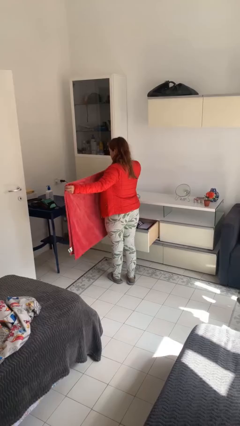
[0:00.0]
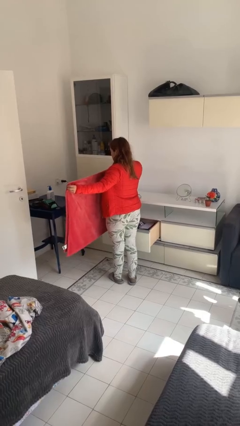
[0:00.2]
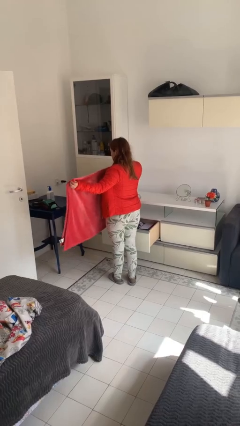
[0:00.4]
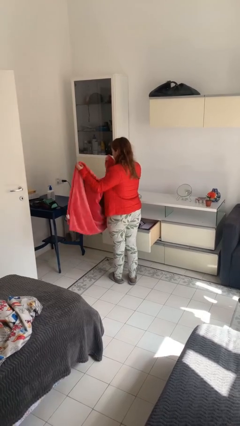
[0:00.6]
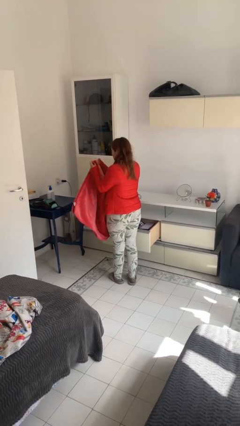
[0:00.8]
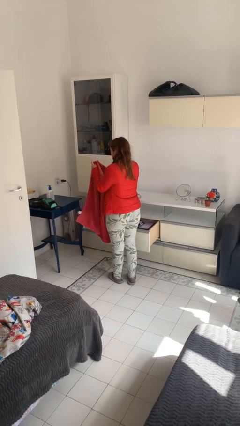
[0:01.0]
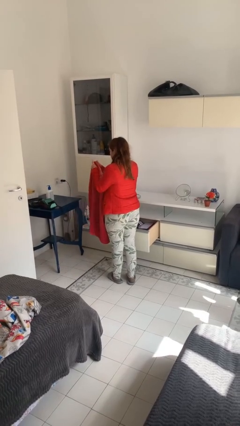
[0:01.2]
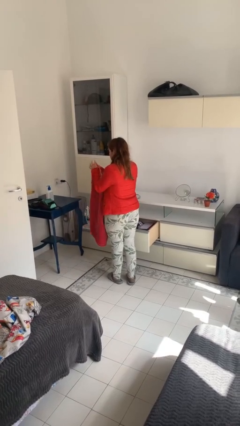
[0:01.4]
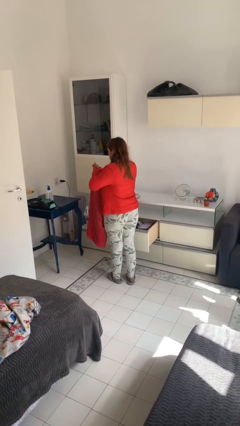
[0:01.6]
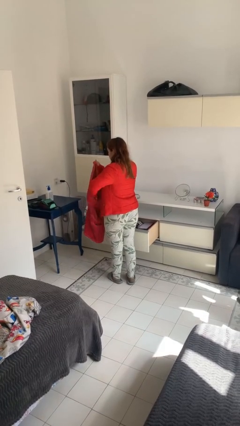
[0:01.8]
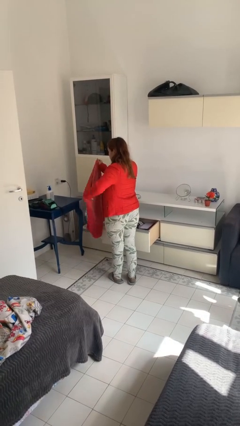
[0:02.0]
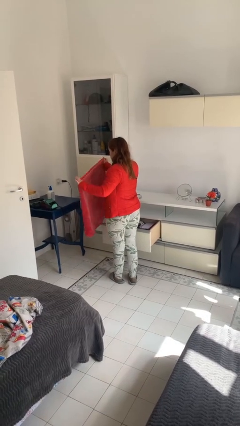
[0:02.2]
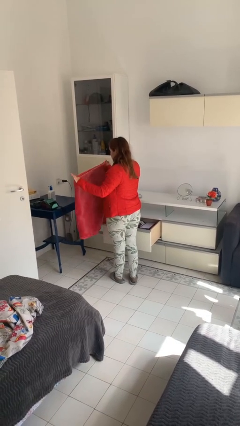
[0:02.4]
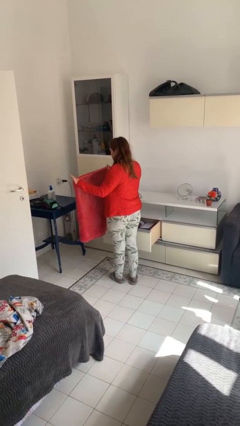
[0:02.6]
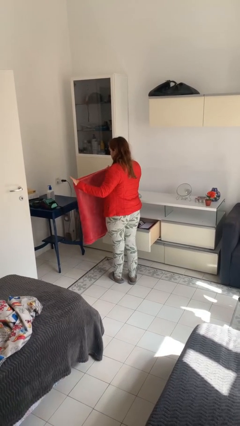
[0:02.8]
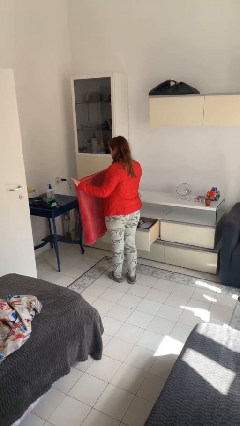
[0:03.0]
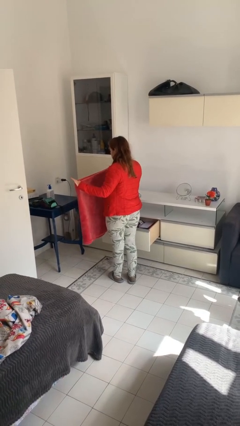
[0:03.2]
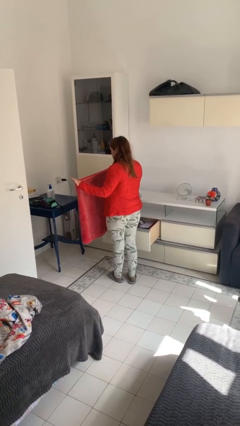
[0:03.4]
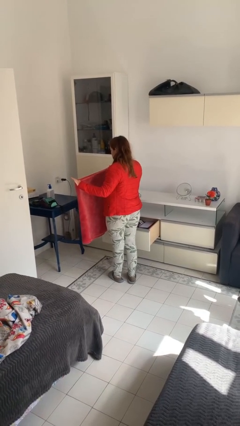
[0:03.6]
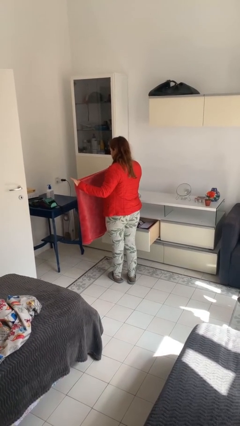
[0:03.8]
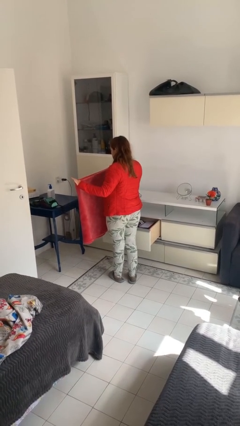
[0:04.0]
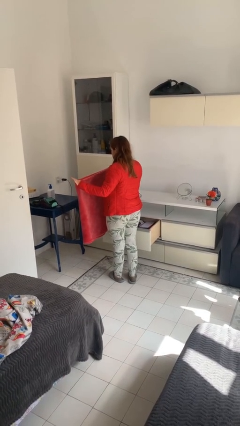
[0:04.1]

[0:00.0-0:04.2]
person unfolds blanket

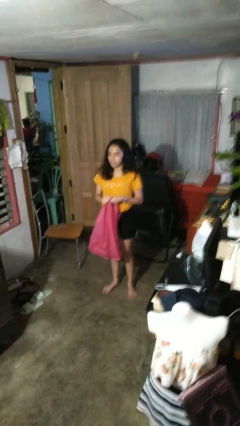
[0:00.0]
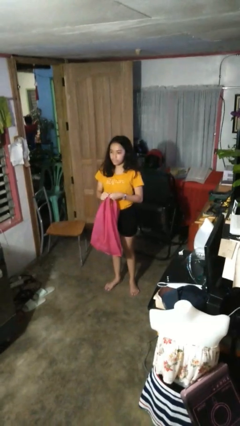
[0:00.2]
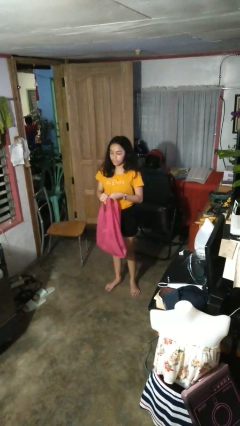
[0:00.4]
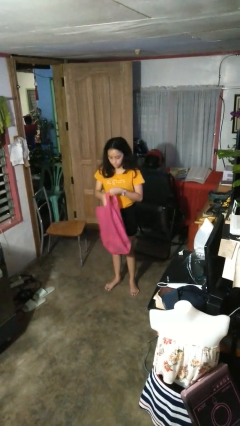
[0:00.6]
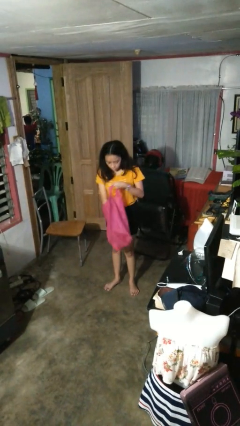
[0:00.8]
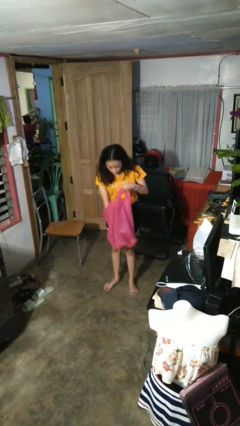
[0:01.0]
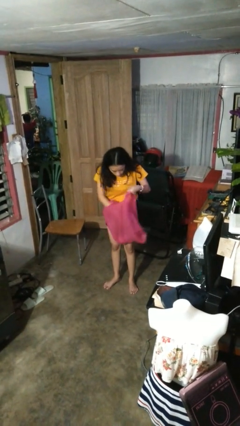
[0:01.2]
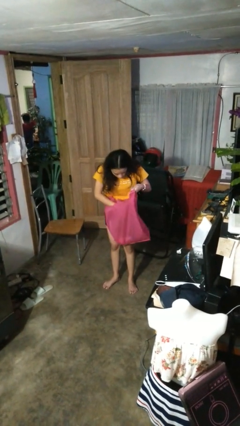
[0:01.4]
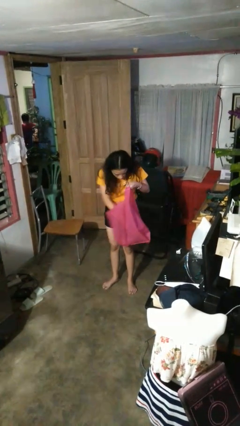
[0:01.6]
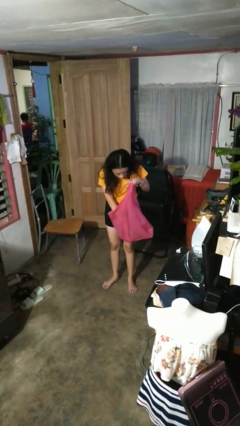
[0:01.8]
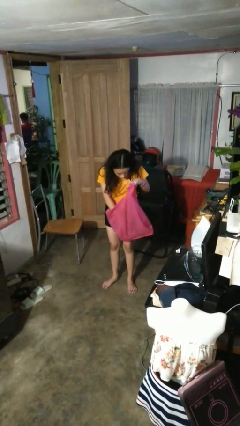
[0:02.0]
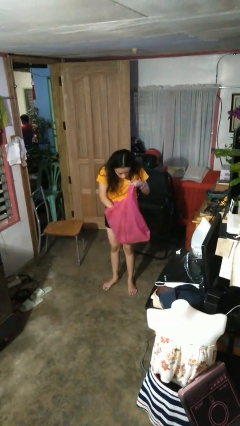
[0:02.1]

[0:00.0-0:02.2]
person searches in bag

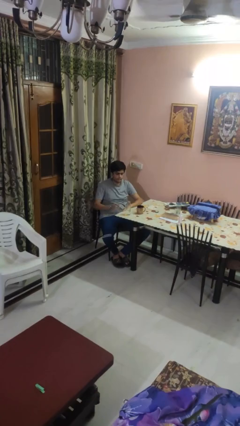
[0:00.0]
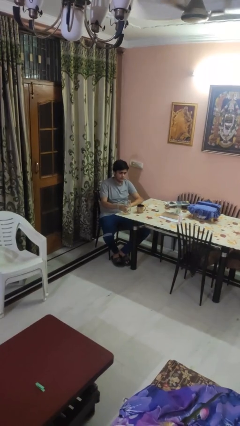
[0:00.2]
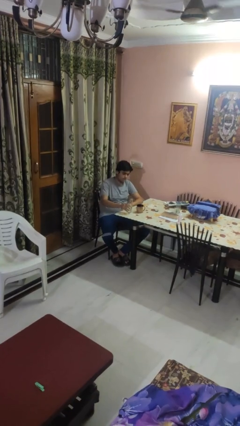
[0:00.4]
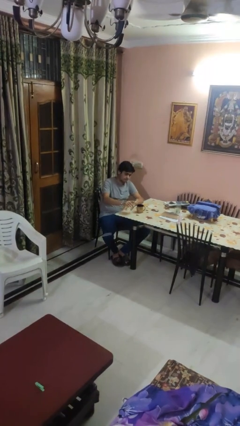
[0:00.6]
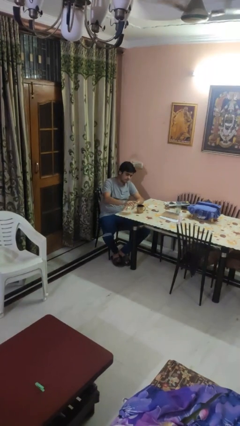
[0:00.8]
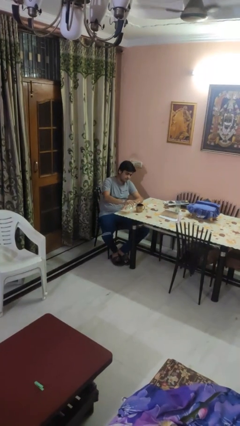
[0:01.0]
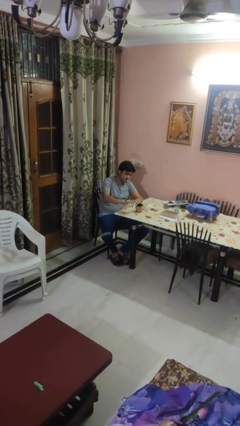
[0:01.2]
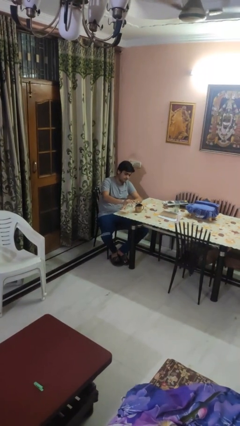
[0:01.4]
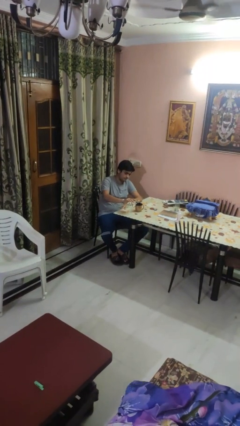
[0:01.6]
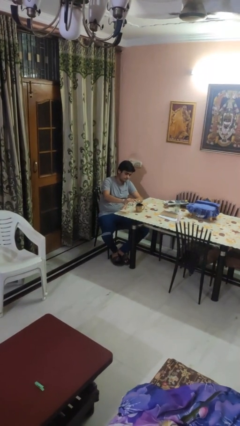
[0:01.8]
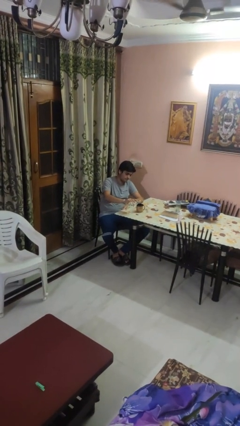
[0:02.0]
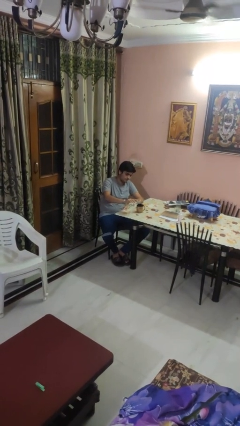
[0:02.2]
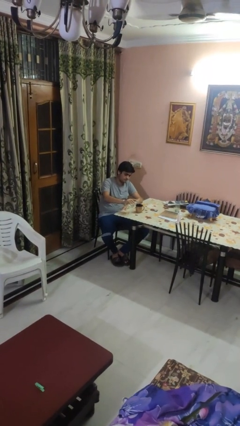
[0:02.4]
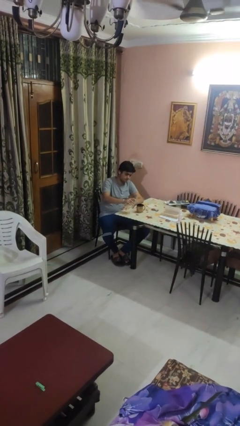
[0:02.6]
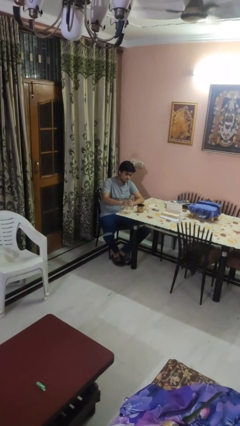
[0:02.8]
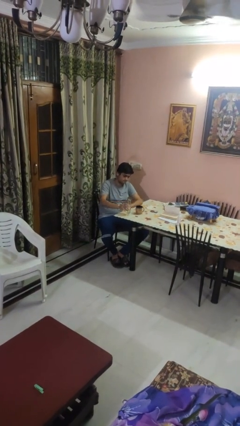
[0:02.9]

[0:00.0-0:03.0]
person pours liquid into cup

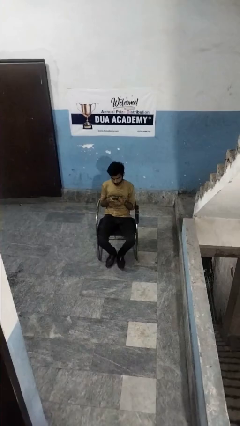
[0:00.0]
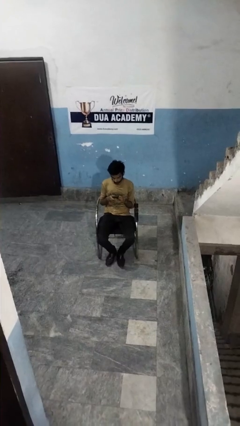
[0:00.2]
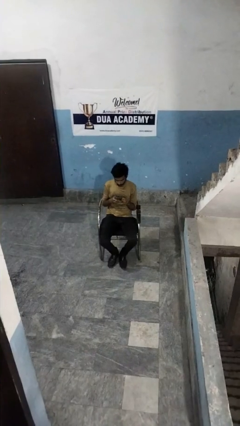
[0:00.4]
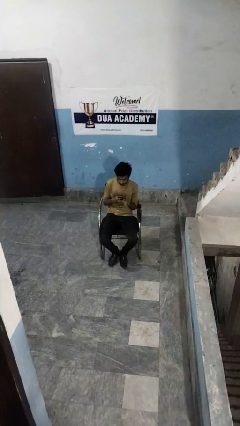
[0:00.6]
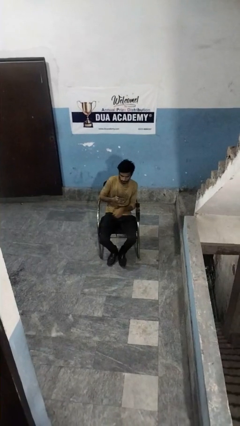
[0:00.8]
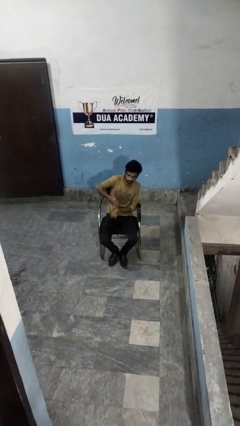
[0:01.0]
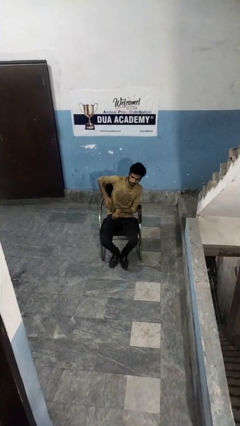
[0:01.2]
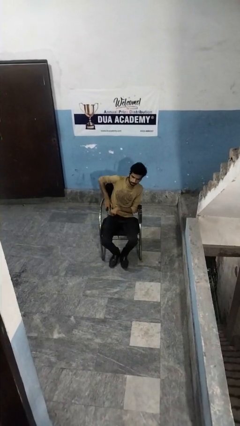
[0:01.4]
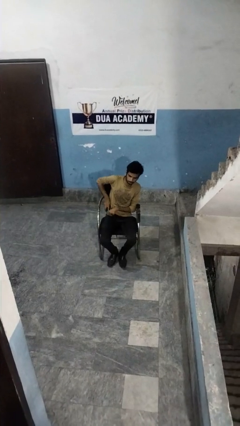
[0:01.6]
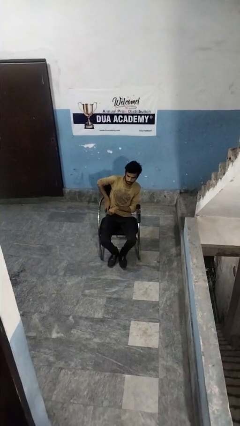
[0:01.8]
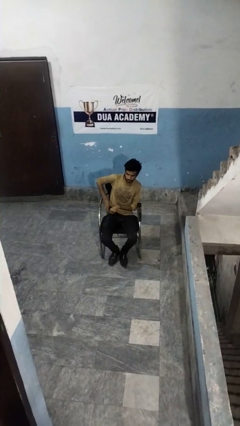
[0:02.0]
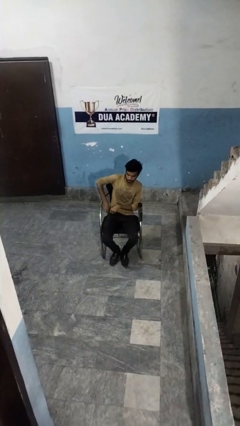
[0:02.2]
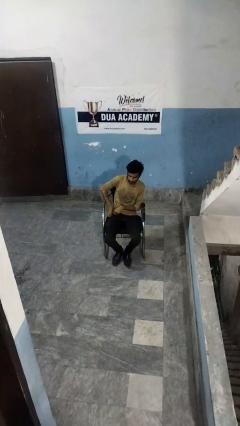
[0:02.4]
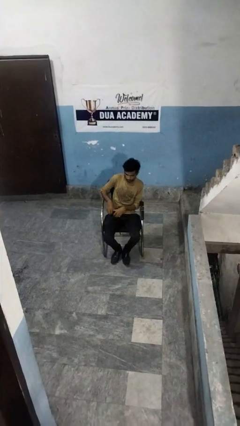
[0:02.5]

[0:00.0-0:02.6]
person puts phone into pocket

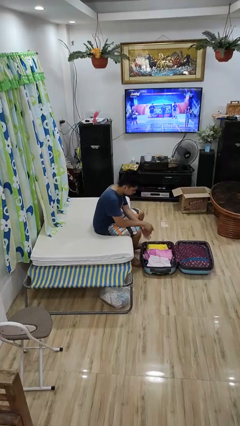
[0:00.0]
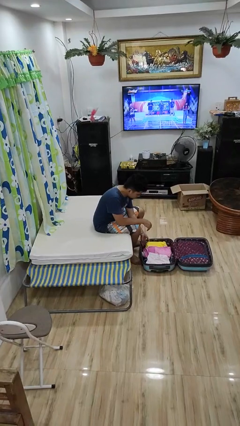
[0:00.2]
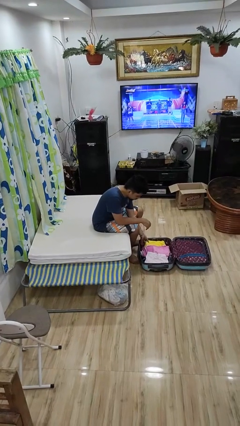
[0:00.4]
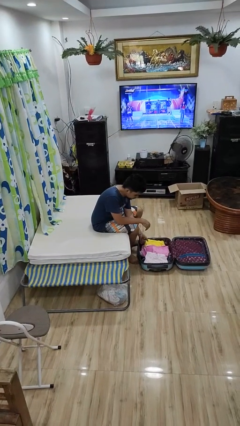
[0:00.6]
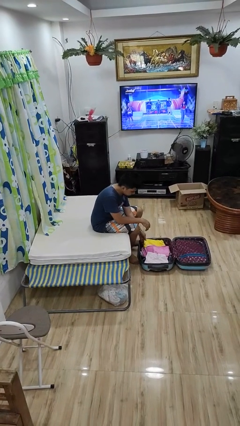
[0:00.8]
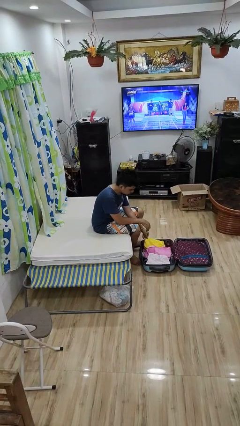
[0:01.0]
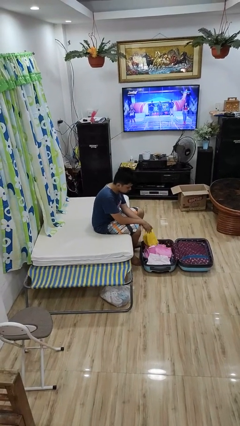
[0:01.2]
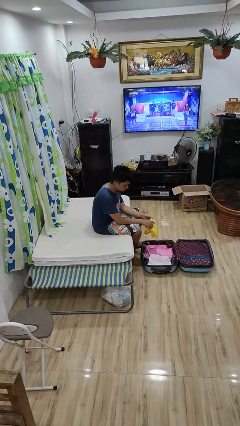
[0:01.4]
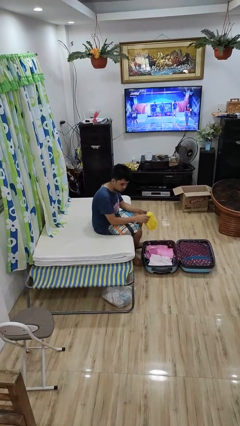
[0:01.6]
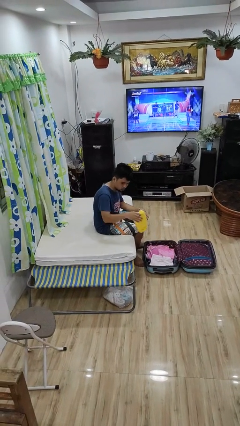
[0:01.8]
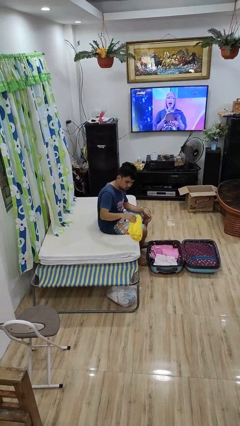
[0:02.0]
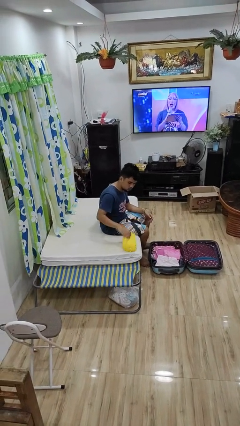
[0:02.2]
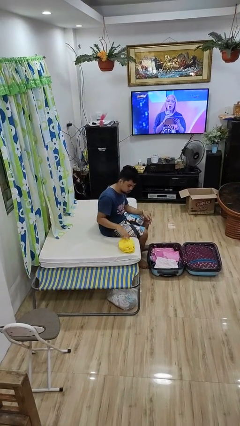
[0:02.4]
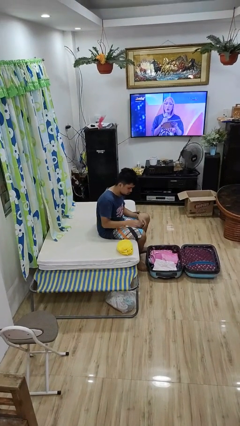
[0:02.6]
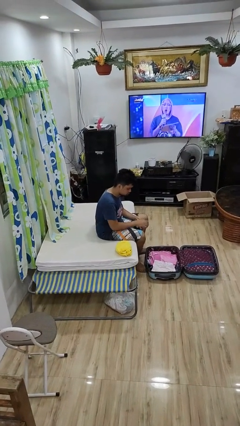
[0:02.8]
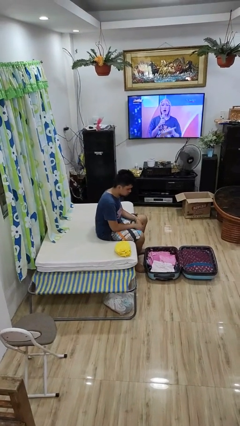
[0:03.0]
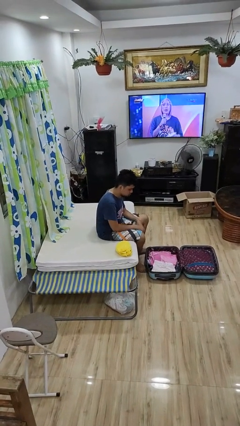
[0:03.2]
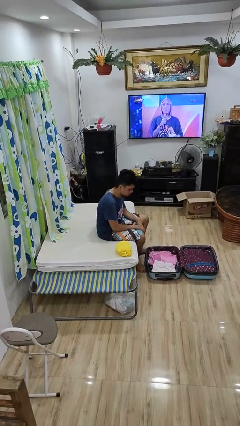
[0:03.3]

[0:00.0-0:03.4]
person unloads clothes from suitcase

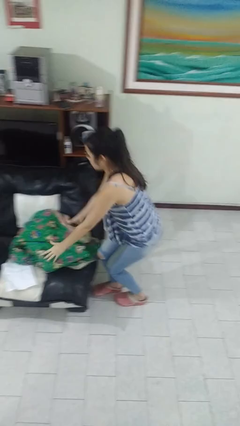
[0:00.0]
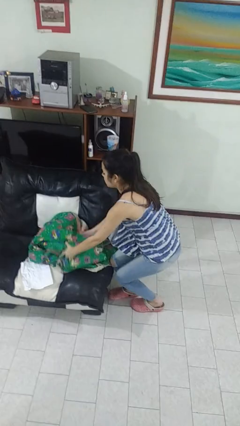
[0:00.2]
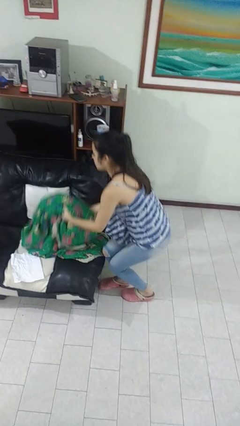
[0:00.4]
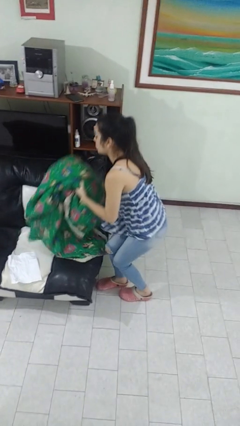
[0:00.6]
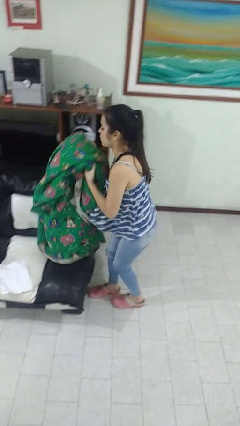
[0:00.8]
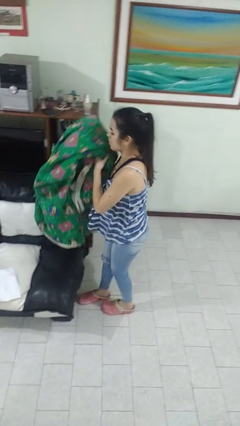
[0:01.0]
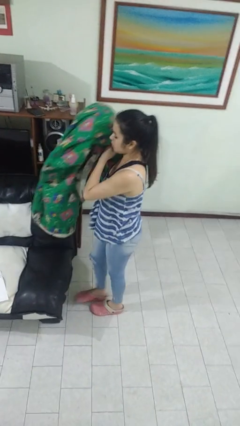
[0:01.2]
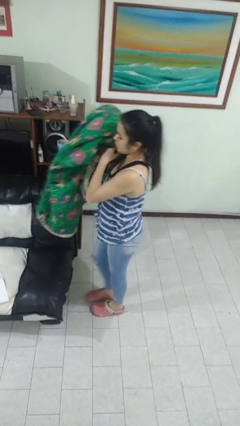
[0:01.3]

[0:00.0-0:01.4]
person picks up object from couch

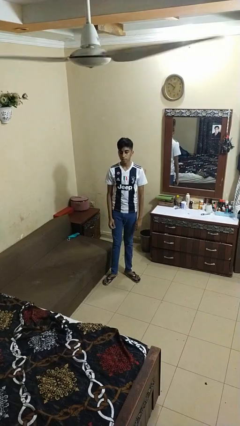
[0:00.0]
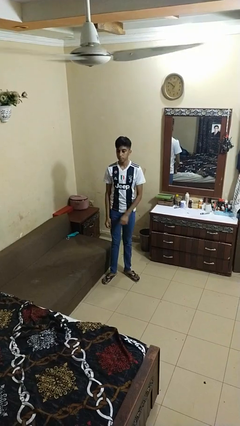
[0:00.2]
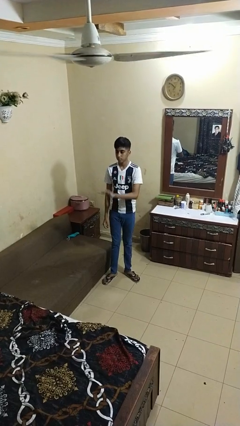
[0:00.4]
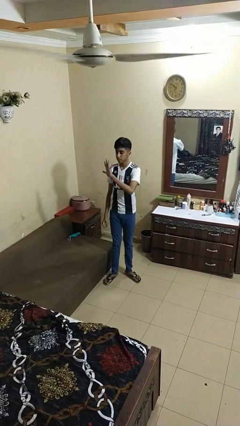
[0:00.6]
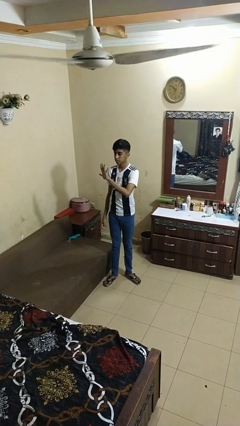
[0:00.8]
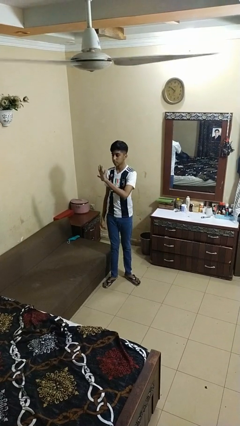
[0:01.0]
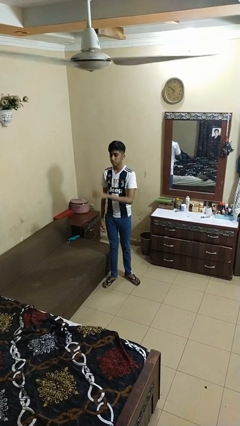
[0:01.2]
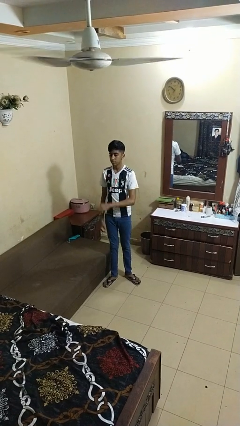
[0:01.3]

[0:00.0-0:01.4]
person gestures number five
